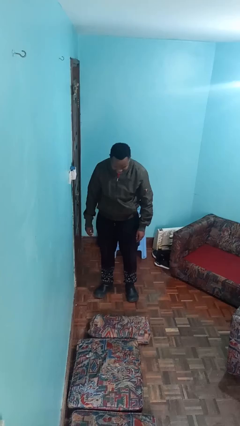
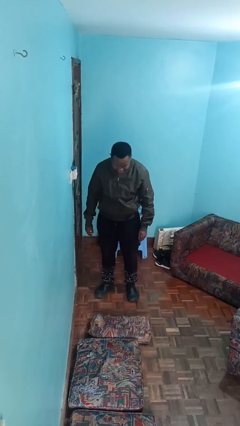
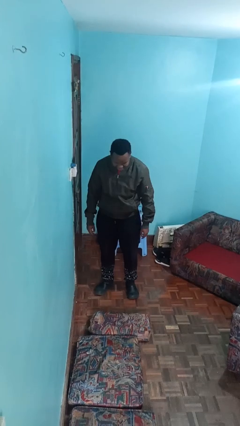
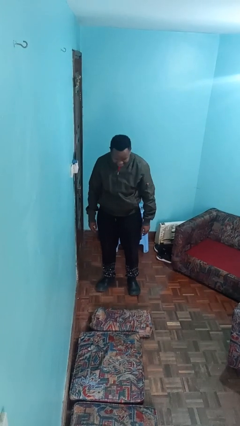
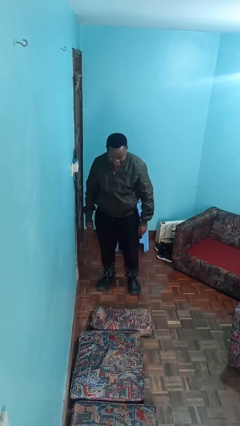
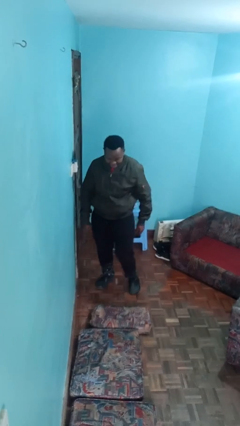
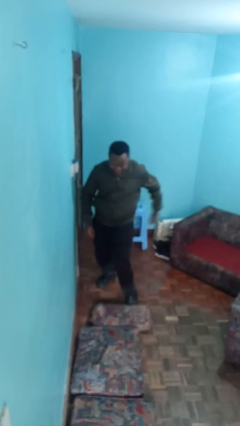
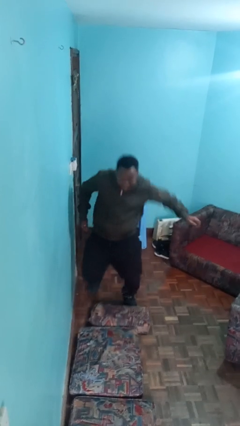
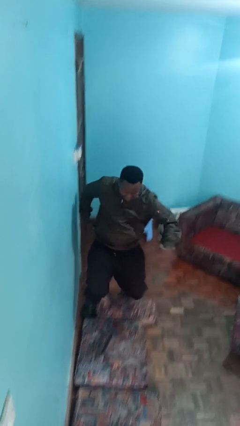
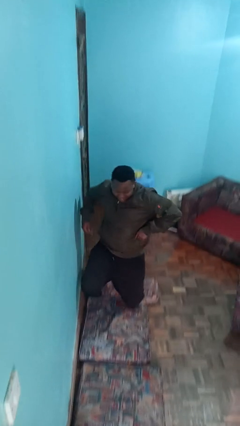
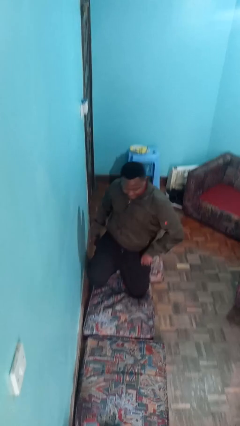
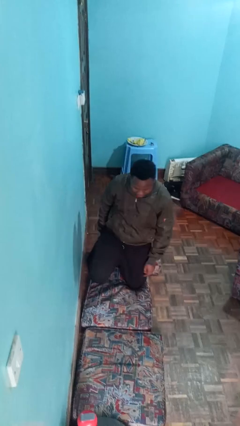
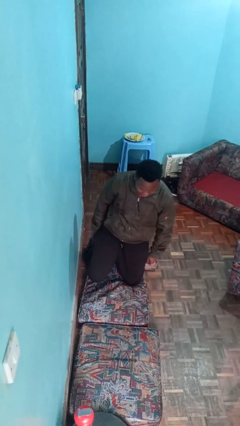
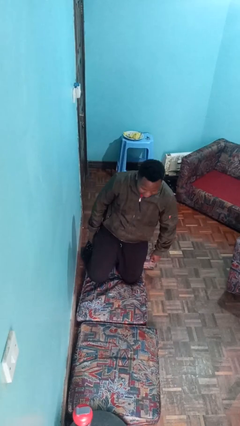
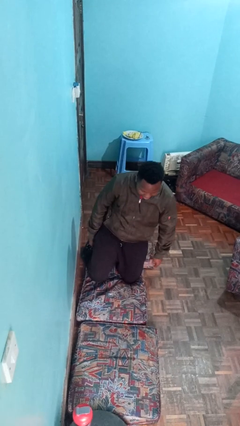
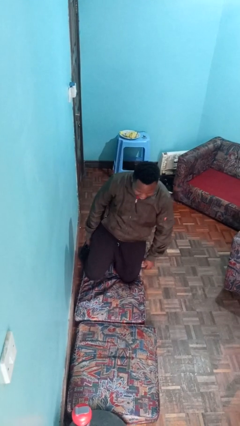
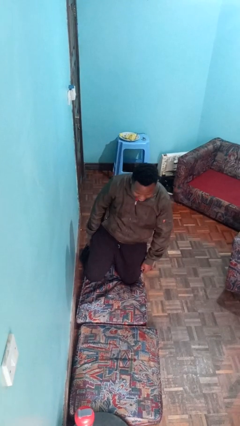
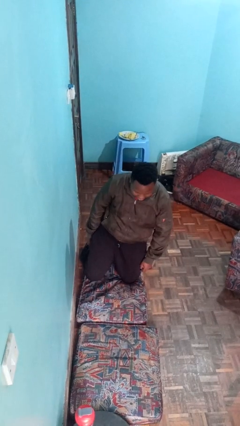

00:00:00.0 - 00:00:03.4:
person trips on object on floor

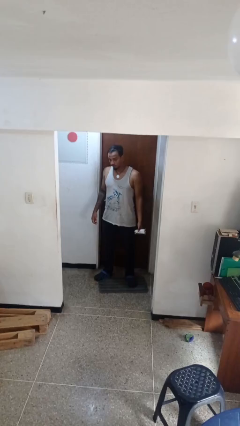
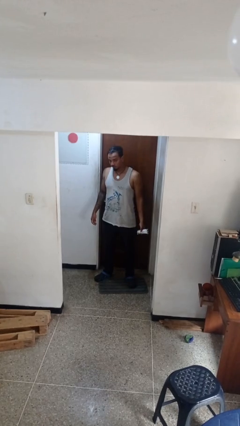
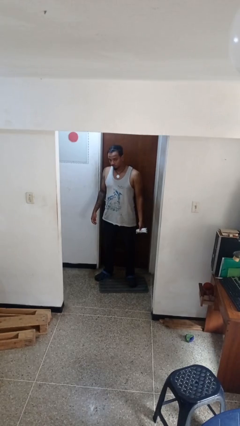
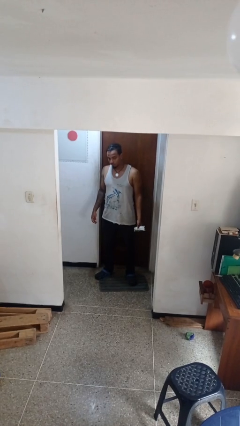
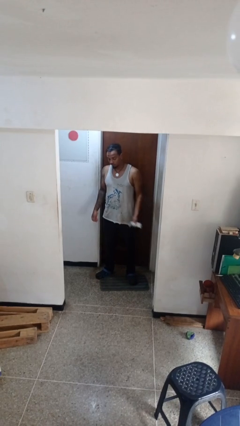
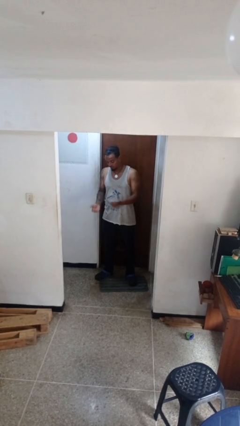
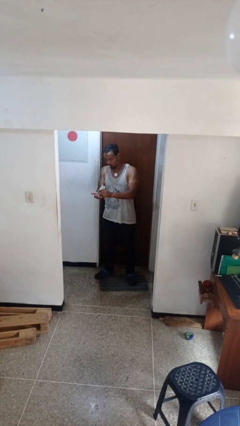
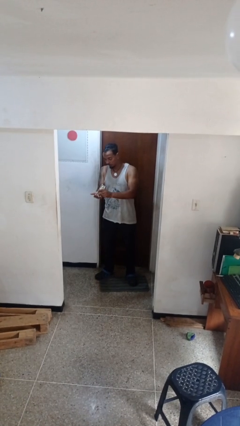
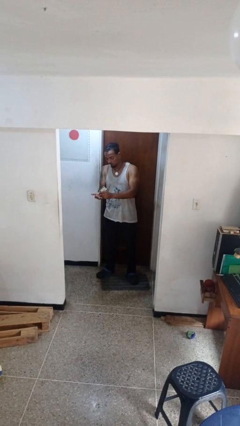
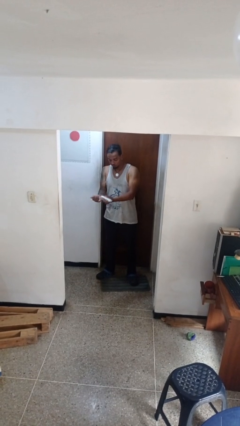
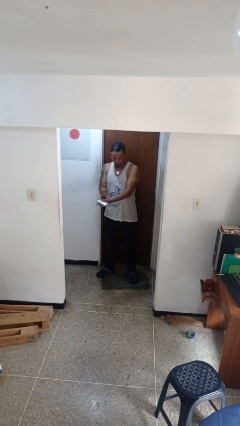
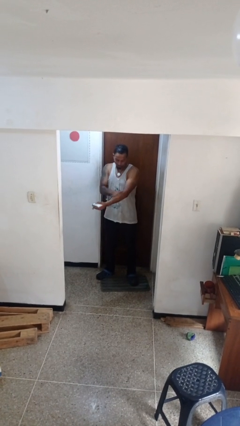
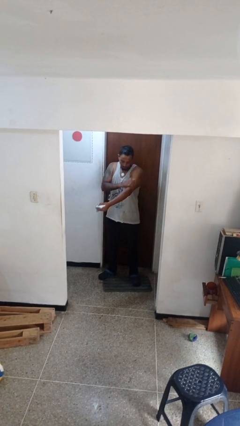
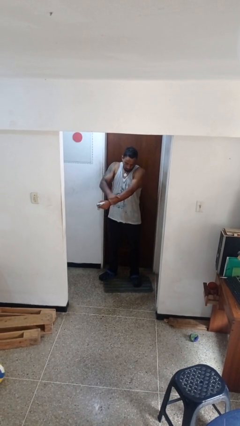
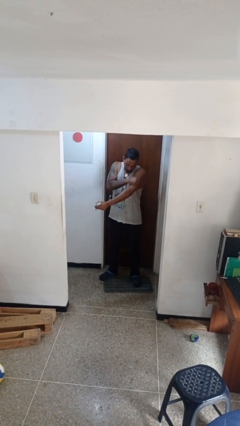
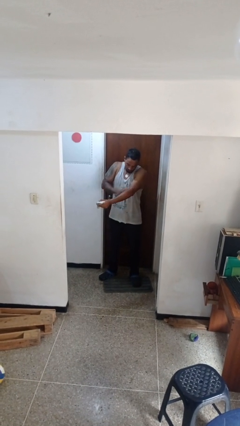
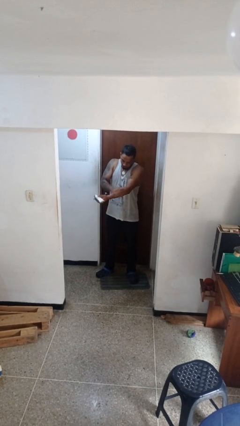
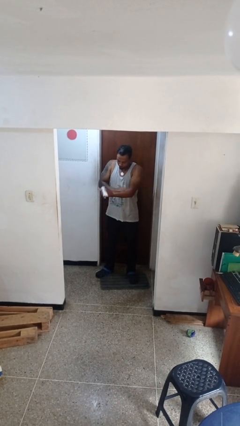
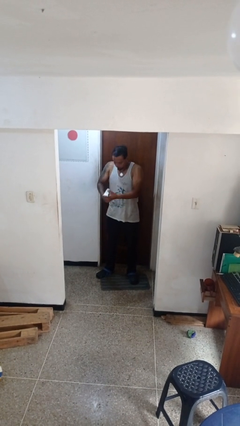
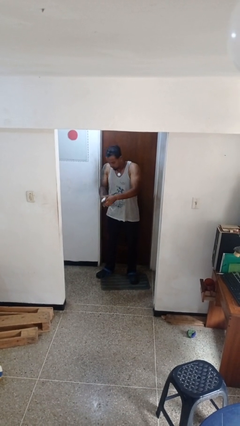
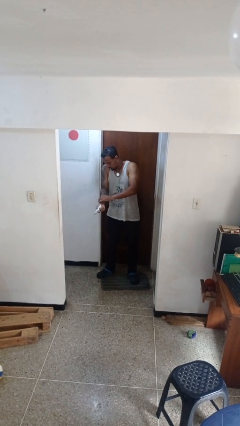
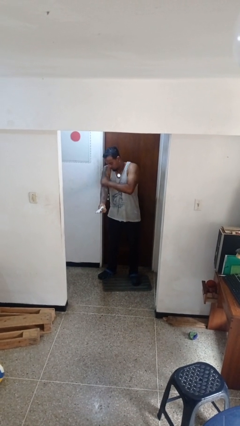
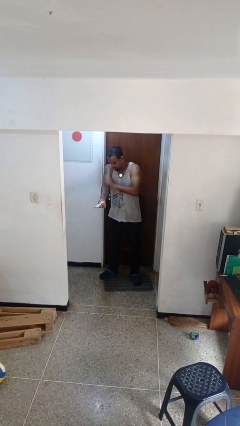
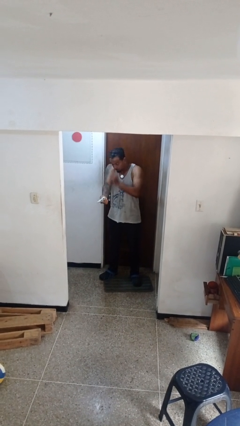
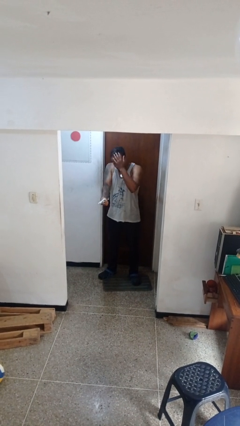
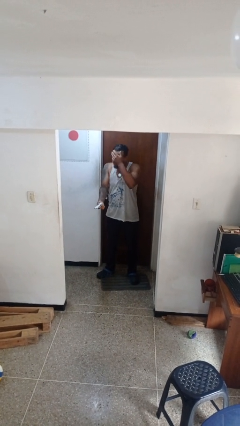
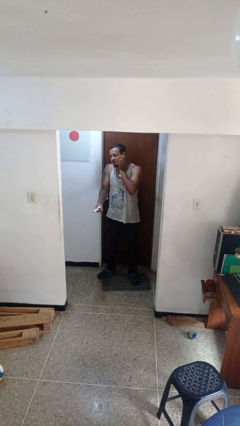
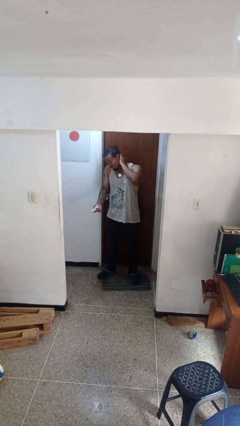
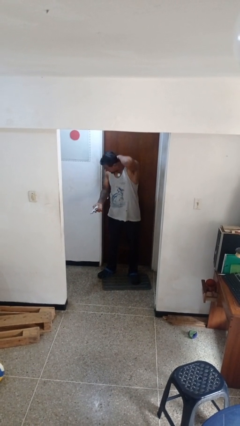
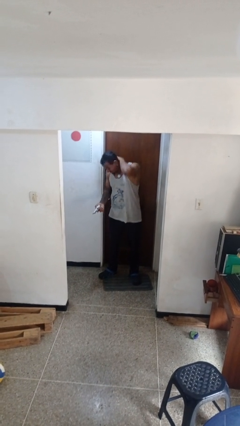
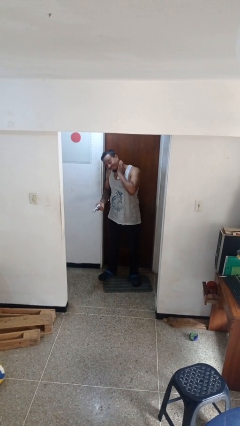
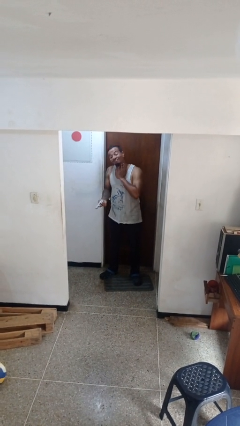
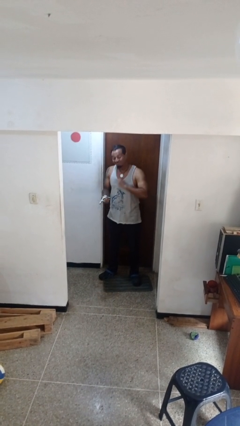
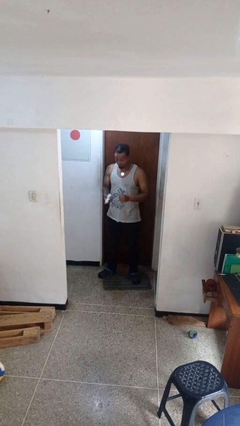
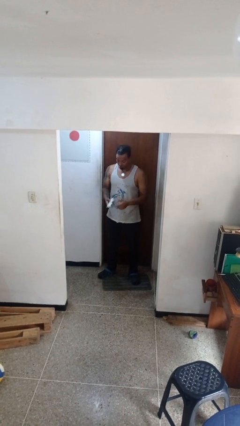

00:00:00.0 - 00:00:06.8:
person applies sunscreen

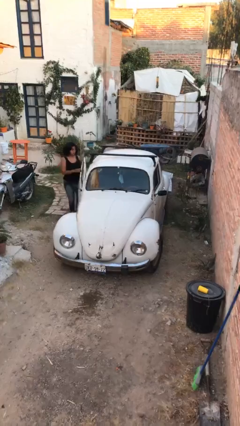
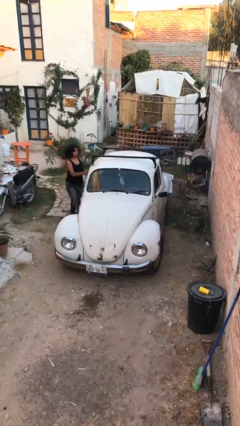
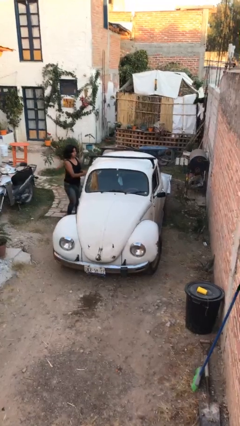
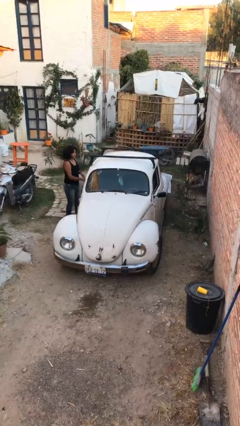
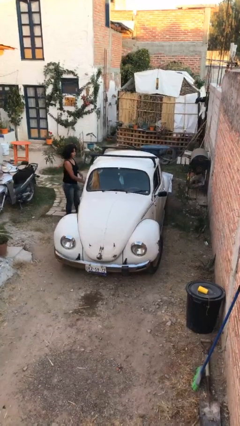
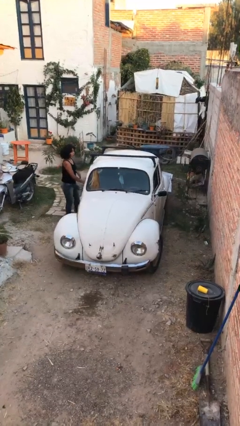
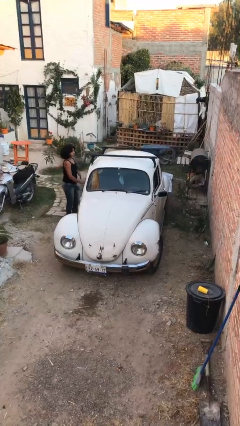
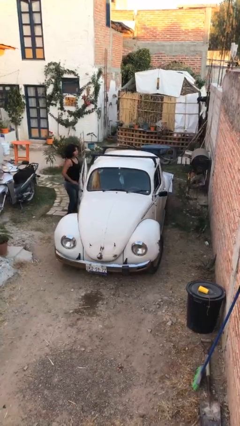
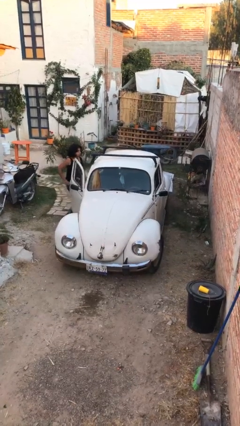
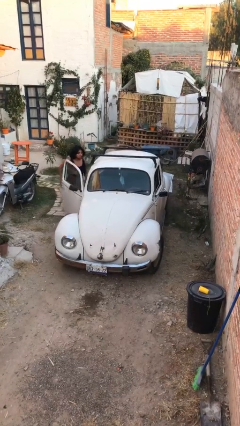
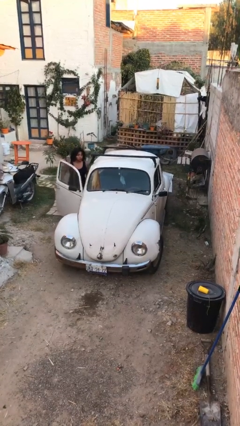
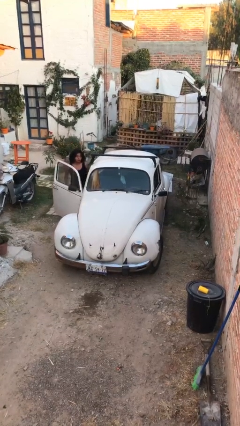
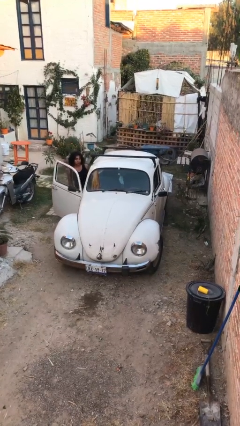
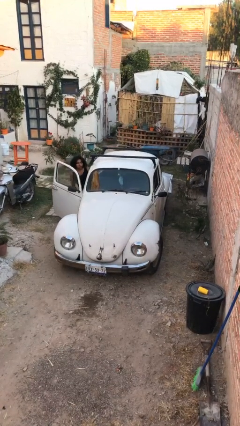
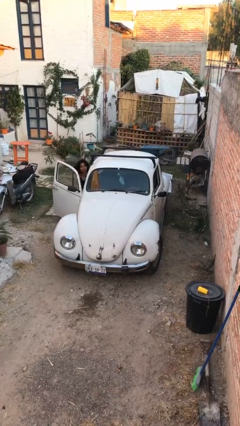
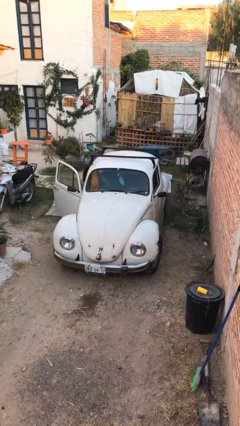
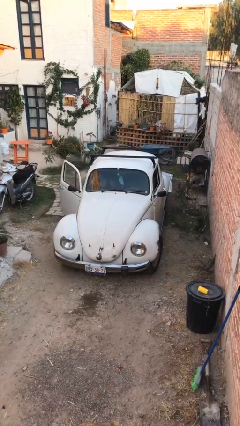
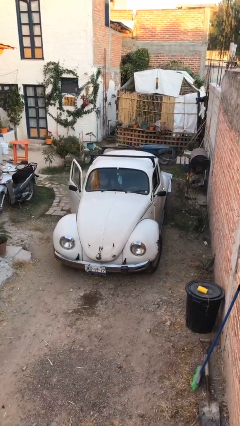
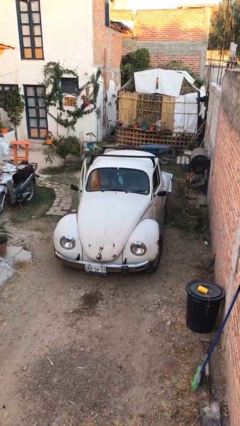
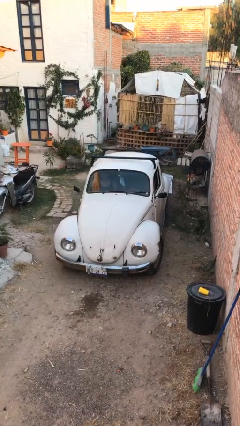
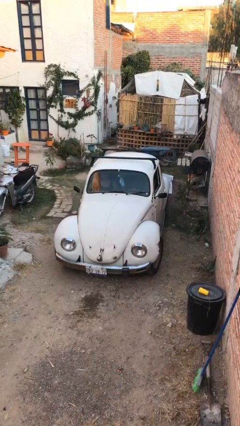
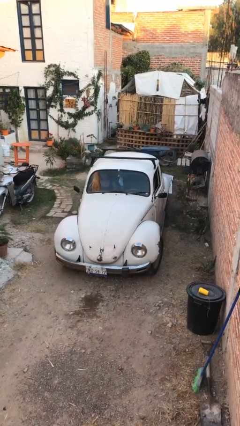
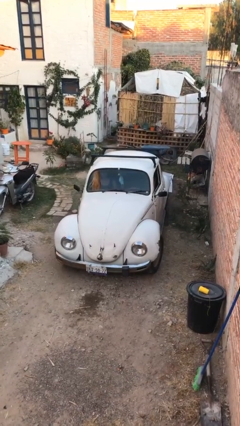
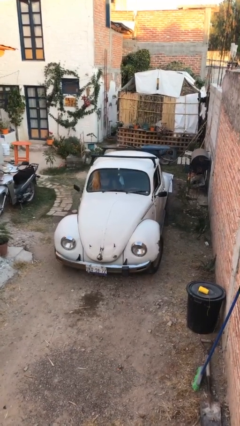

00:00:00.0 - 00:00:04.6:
car picks up person

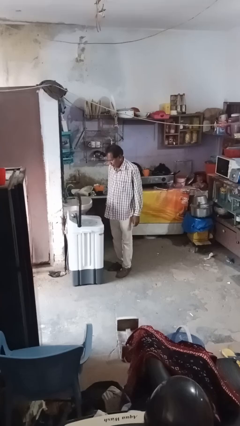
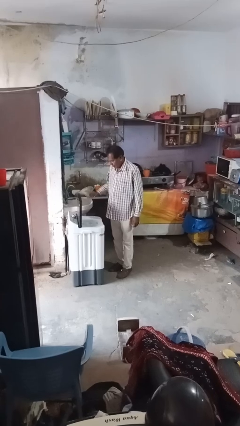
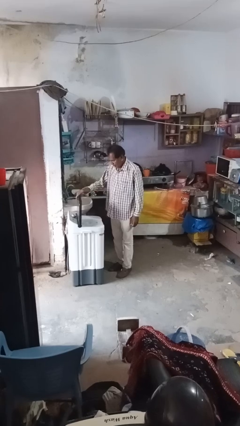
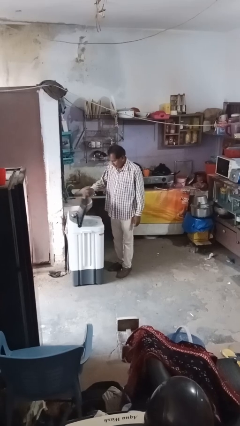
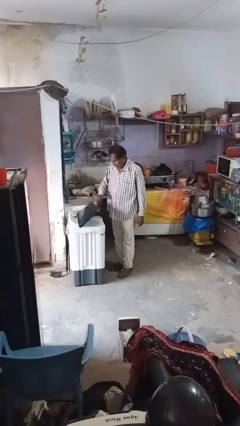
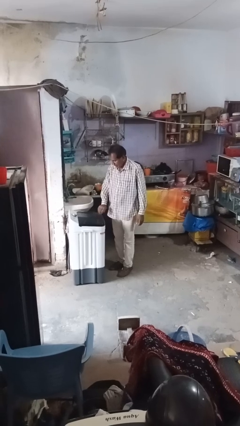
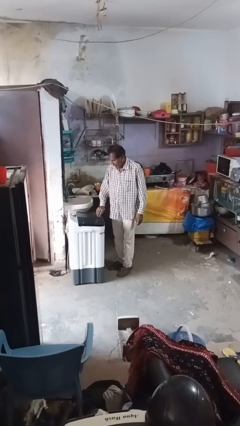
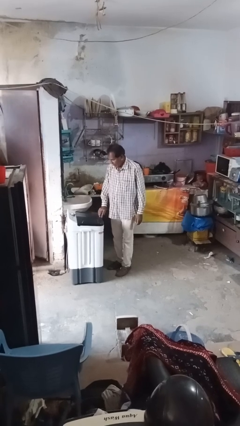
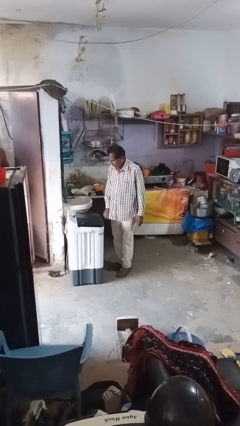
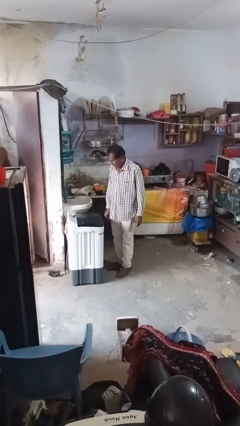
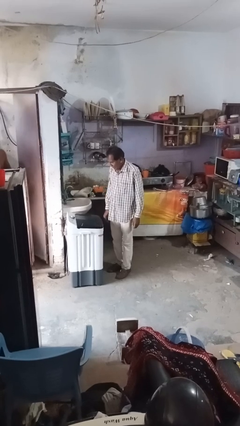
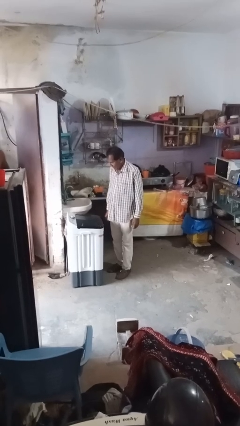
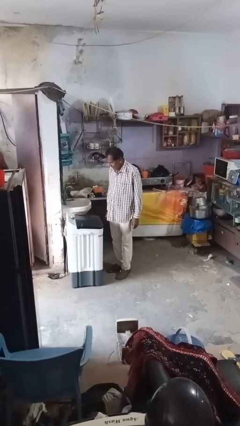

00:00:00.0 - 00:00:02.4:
person closes clothes washer
